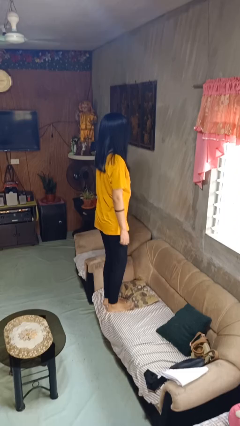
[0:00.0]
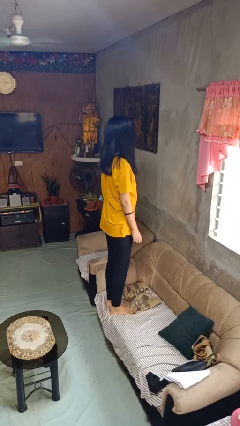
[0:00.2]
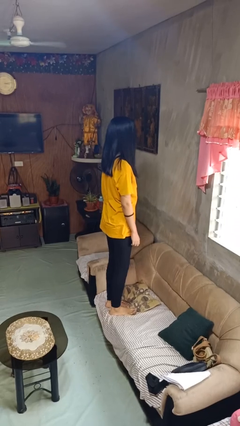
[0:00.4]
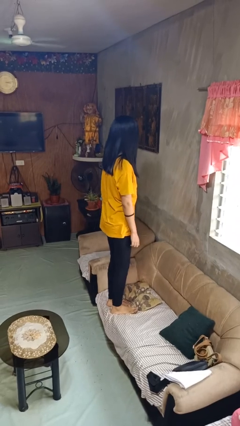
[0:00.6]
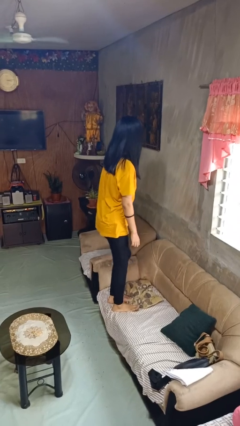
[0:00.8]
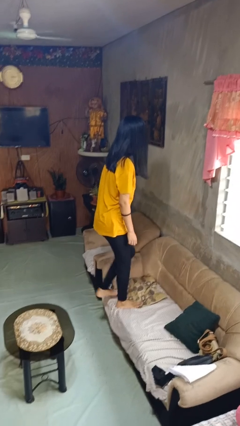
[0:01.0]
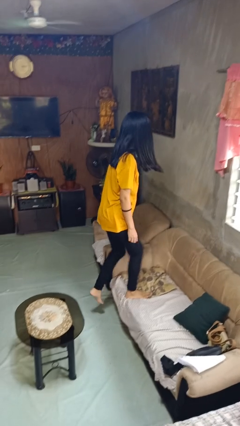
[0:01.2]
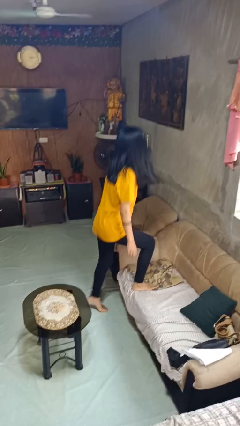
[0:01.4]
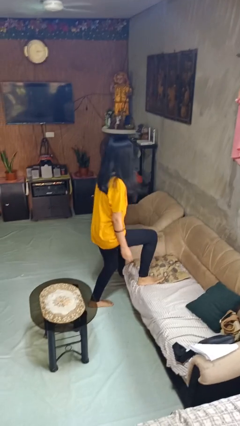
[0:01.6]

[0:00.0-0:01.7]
person climbs off couch

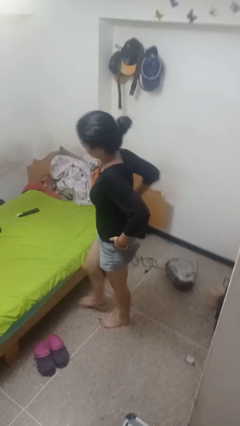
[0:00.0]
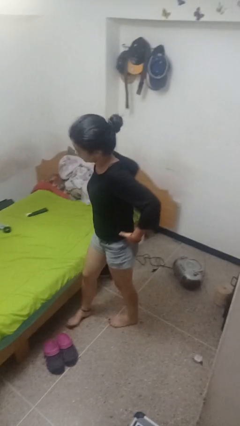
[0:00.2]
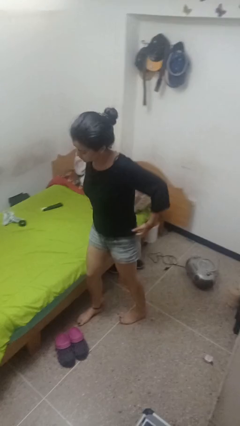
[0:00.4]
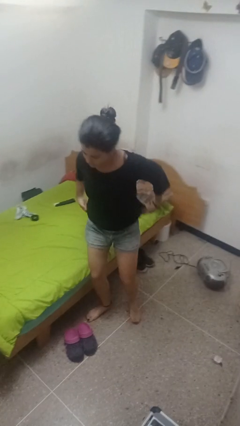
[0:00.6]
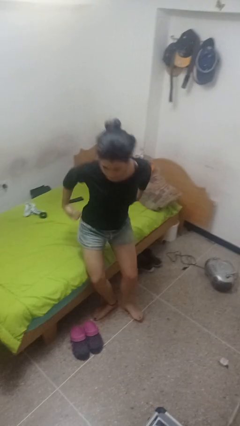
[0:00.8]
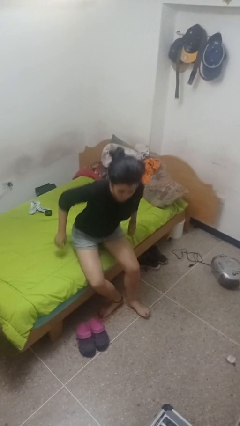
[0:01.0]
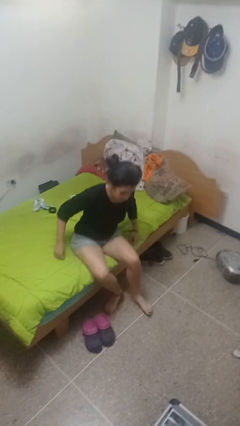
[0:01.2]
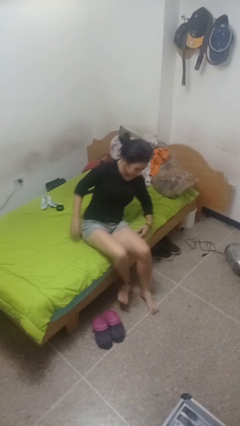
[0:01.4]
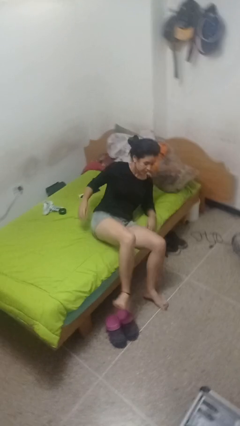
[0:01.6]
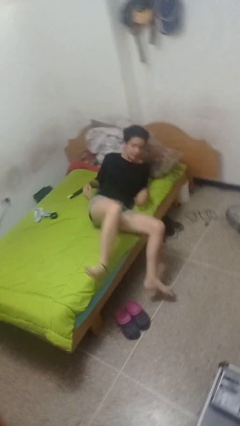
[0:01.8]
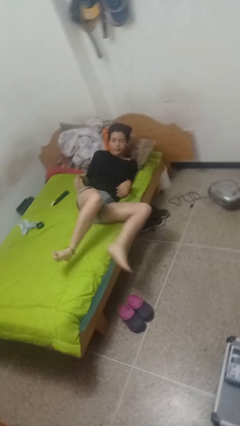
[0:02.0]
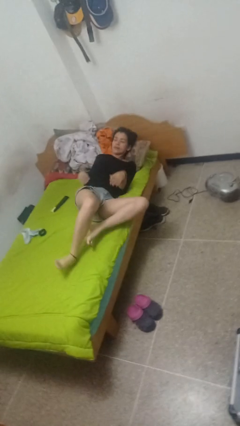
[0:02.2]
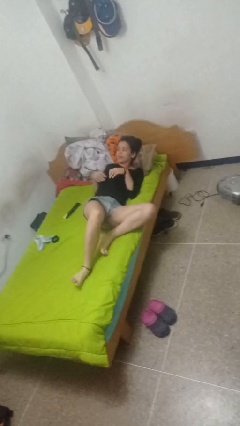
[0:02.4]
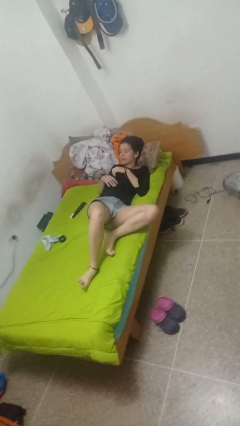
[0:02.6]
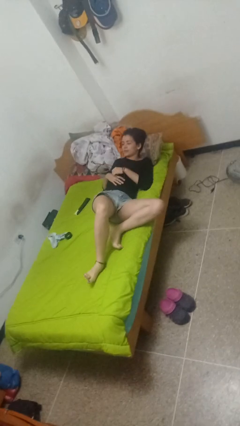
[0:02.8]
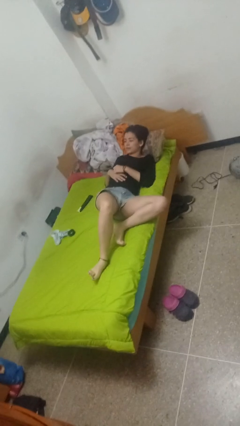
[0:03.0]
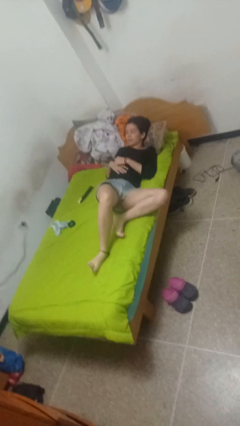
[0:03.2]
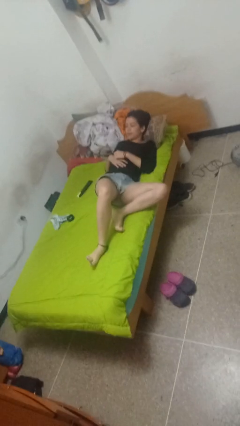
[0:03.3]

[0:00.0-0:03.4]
person lies down on bed

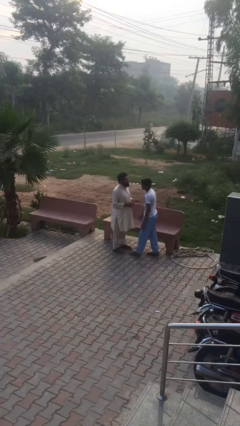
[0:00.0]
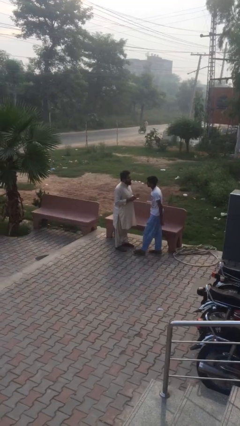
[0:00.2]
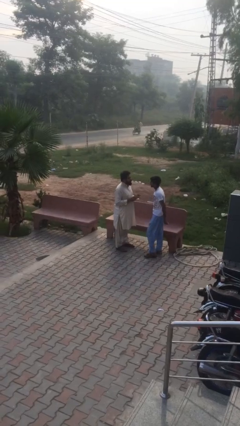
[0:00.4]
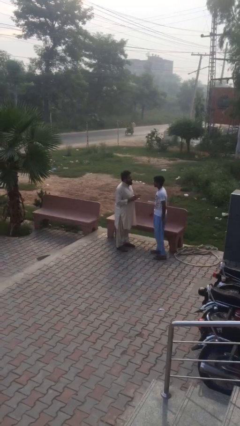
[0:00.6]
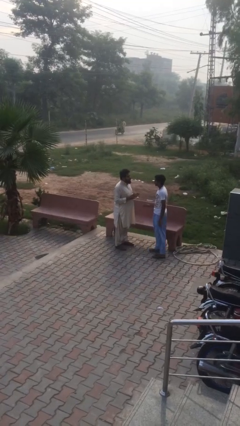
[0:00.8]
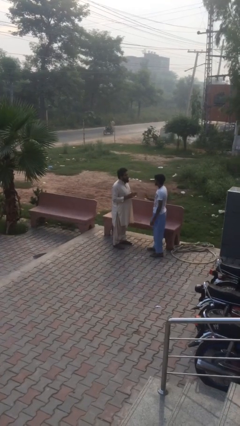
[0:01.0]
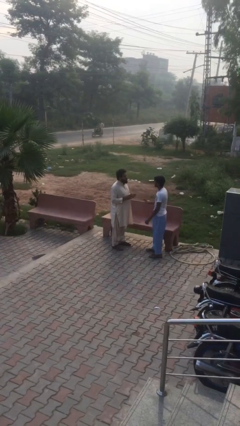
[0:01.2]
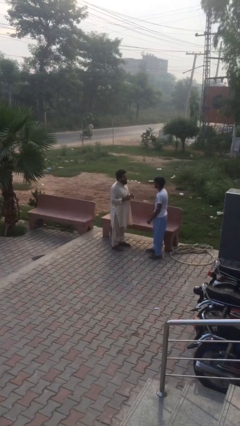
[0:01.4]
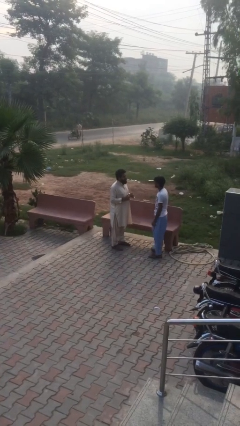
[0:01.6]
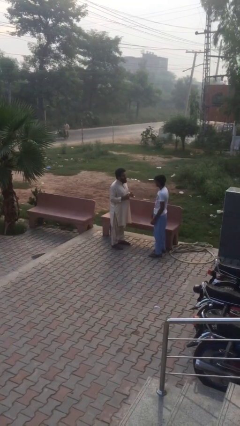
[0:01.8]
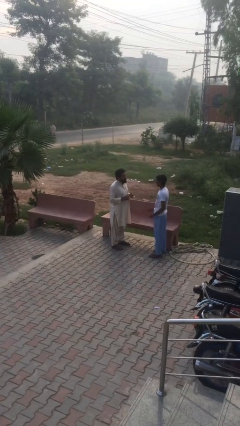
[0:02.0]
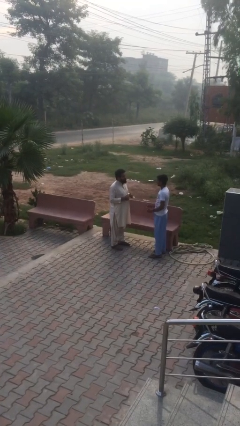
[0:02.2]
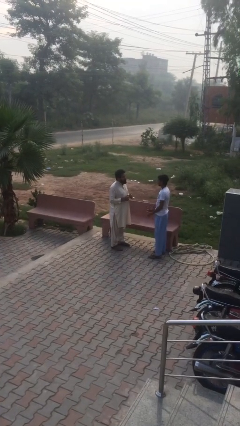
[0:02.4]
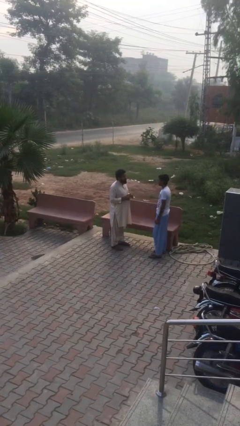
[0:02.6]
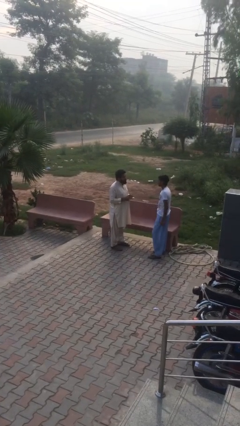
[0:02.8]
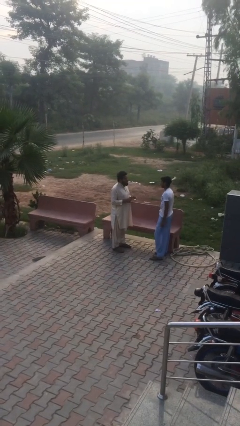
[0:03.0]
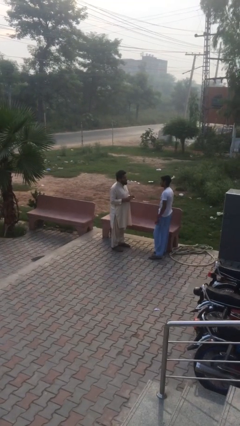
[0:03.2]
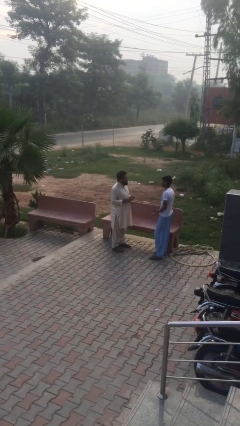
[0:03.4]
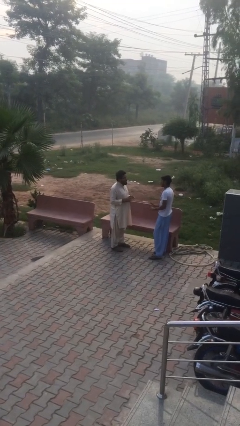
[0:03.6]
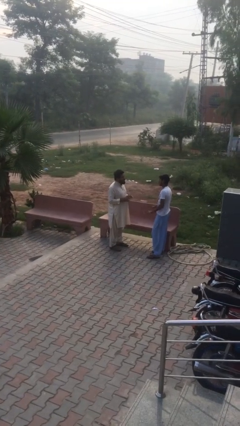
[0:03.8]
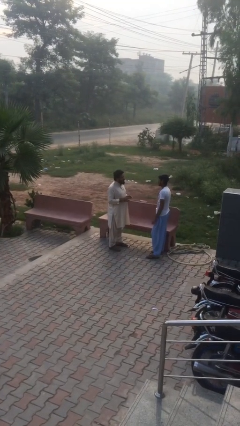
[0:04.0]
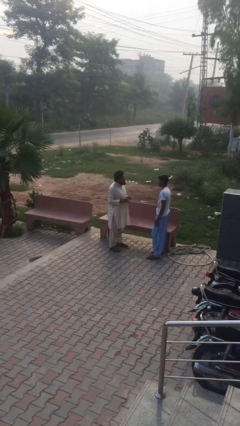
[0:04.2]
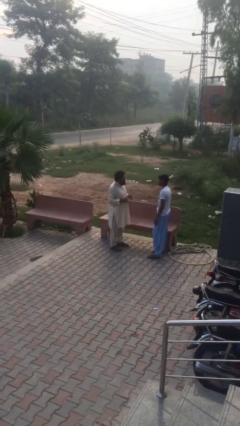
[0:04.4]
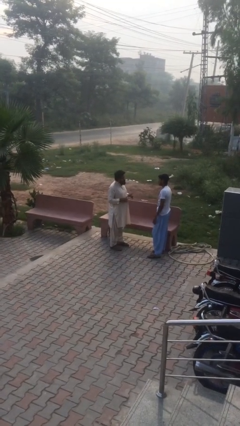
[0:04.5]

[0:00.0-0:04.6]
person talks to person

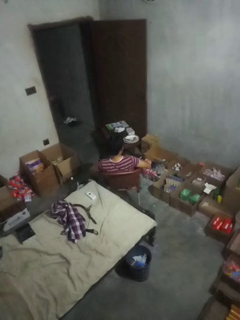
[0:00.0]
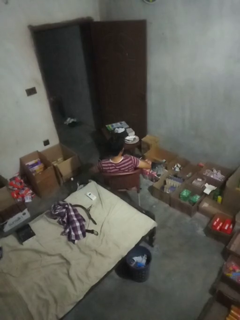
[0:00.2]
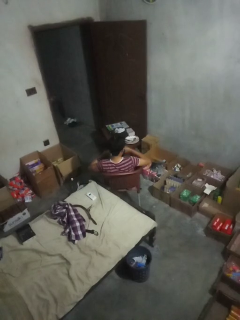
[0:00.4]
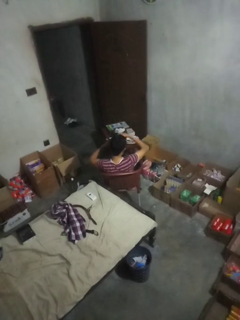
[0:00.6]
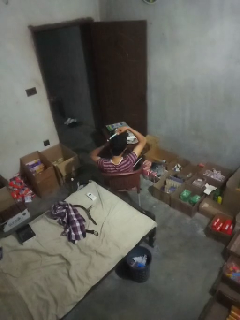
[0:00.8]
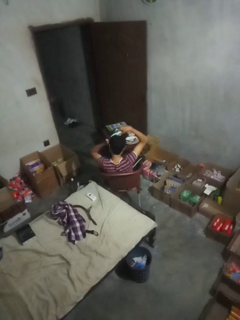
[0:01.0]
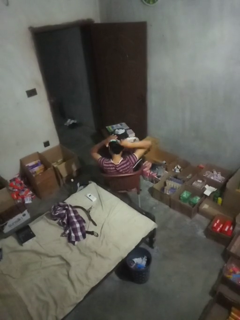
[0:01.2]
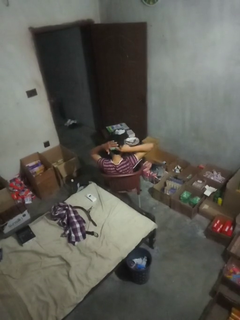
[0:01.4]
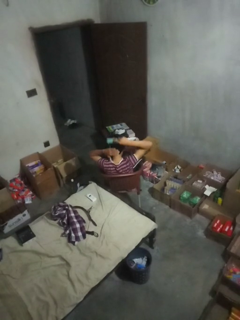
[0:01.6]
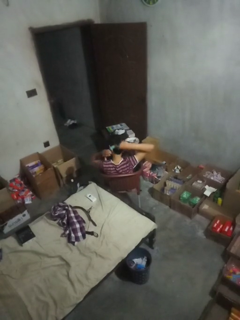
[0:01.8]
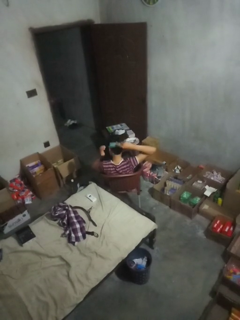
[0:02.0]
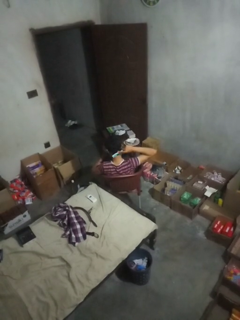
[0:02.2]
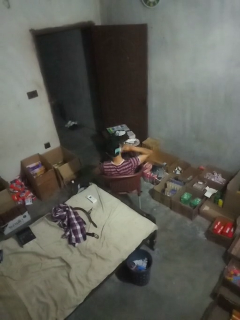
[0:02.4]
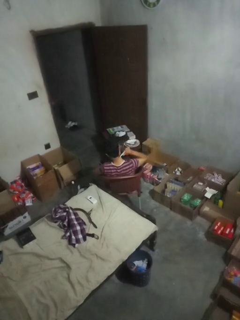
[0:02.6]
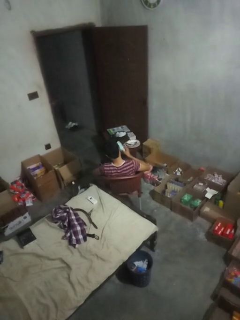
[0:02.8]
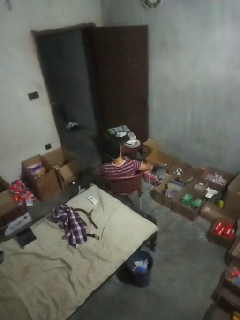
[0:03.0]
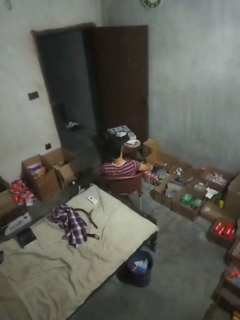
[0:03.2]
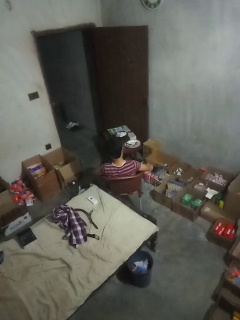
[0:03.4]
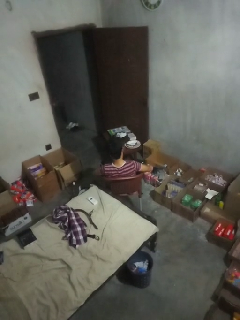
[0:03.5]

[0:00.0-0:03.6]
person brushes hair

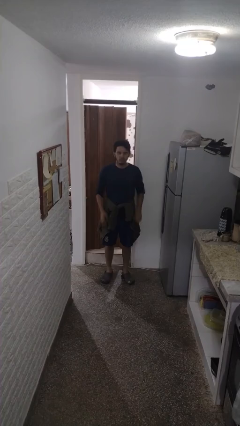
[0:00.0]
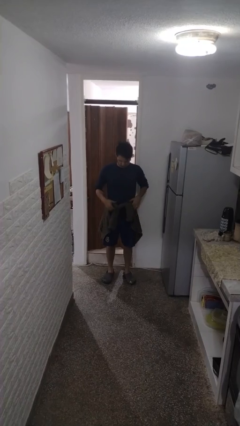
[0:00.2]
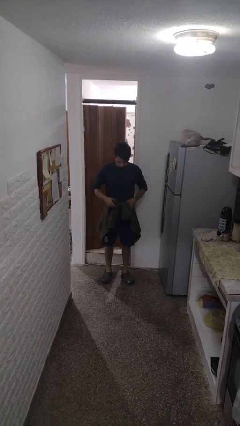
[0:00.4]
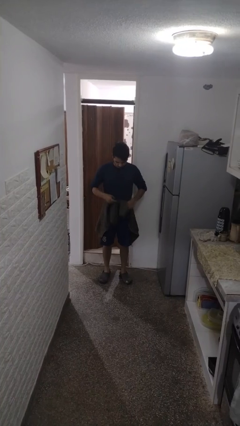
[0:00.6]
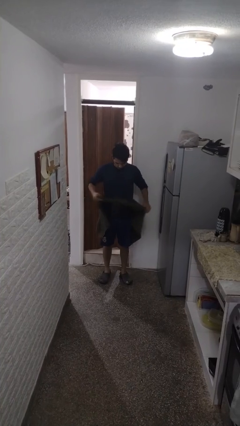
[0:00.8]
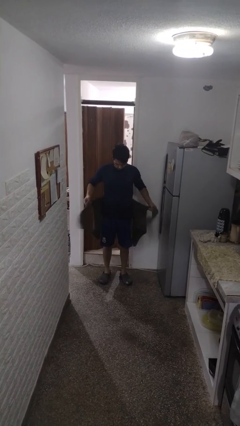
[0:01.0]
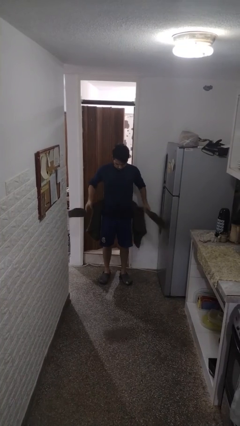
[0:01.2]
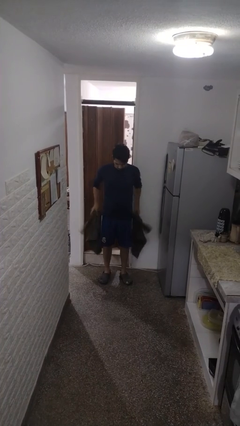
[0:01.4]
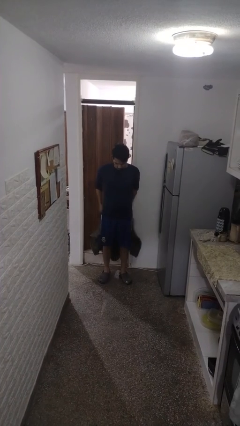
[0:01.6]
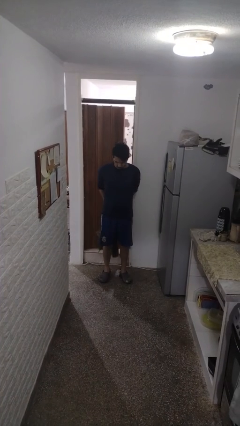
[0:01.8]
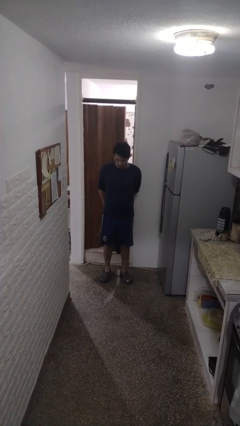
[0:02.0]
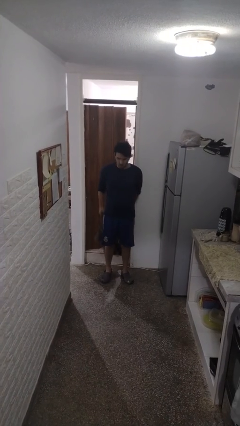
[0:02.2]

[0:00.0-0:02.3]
person unties jacket around waist

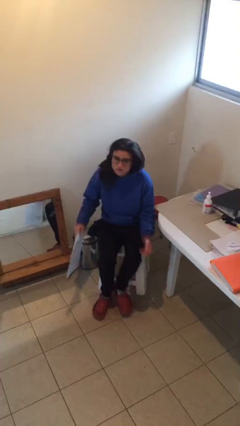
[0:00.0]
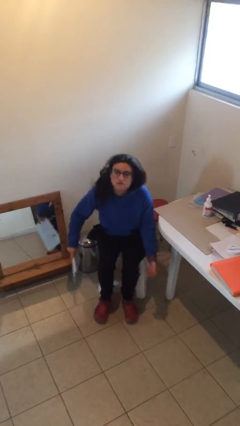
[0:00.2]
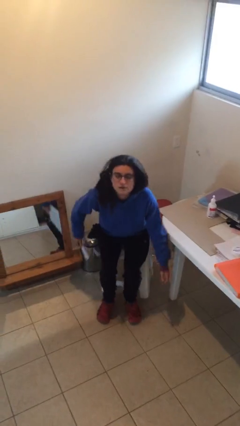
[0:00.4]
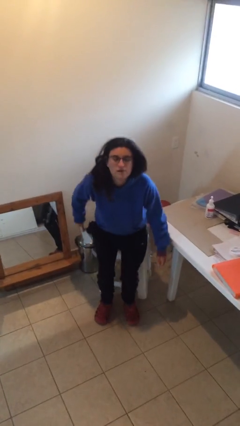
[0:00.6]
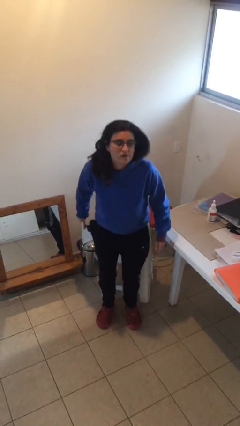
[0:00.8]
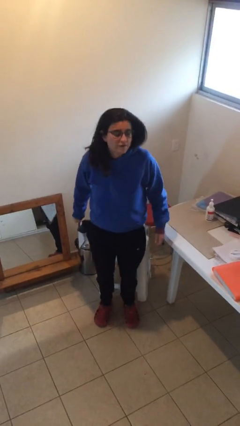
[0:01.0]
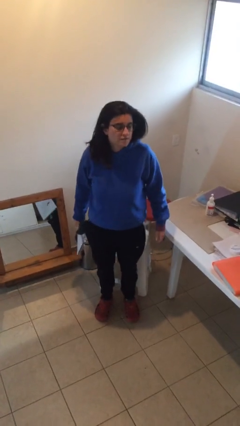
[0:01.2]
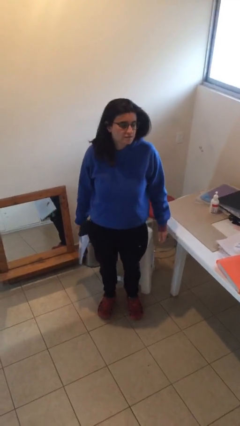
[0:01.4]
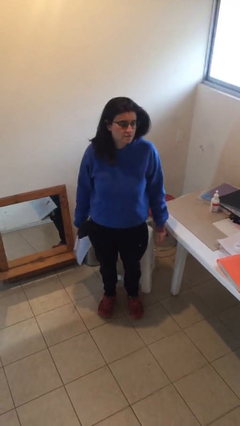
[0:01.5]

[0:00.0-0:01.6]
person stands up

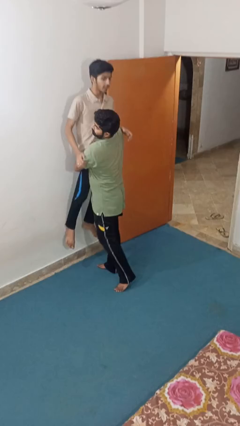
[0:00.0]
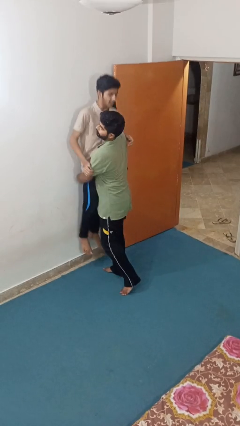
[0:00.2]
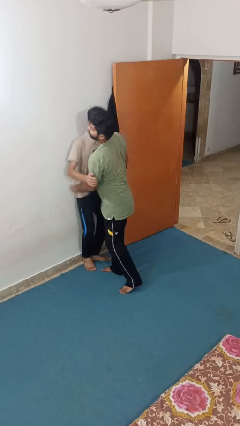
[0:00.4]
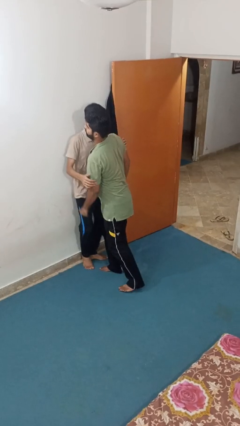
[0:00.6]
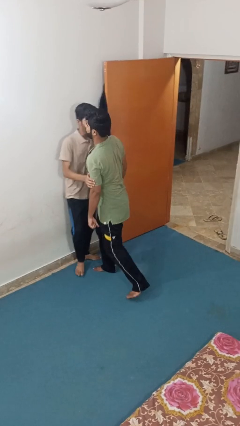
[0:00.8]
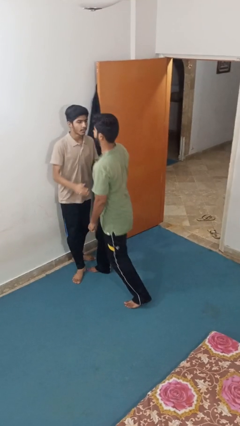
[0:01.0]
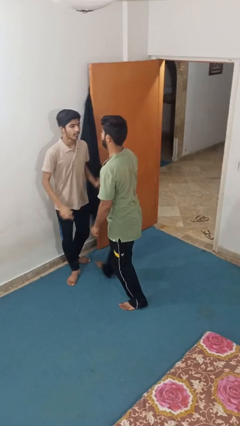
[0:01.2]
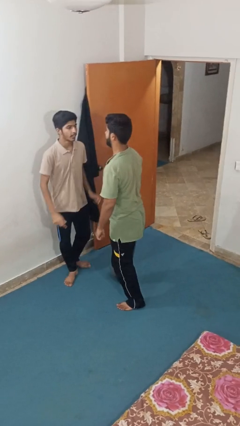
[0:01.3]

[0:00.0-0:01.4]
person puts down person
